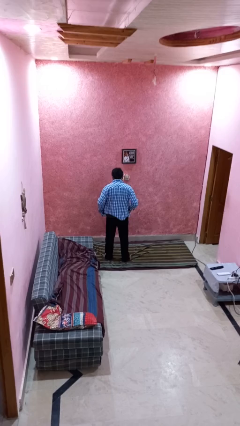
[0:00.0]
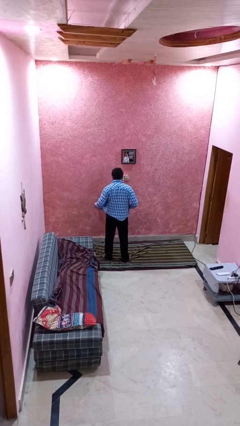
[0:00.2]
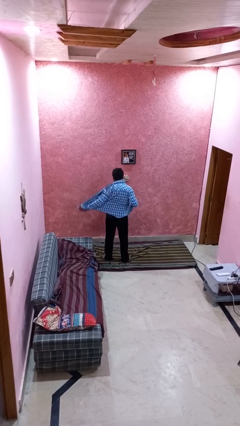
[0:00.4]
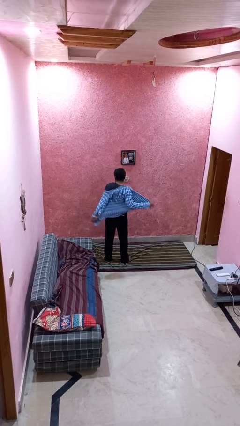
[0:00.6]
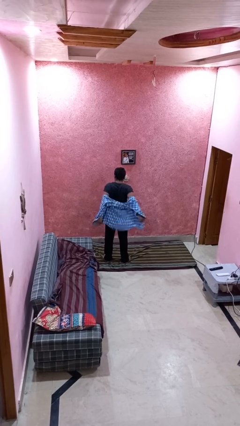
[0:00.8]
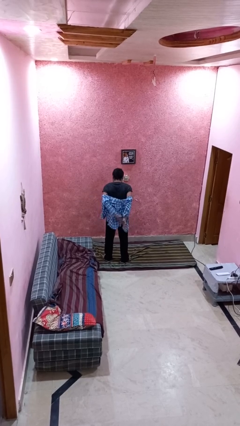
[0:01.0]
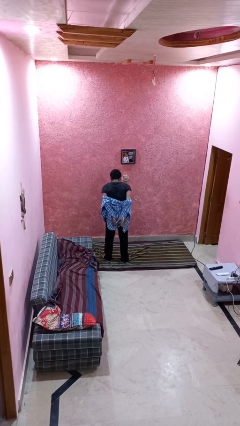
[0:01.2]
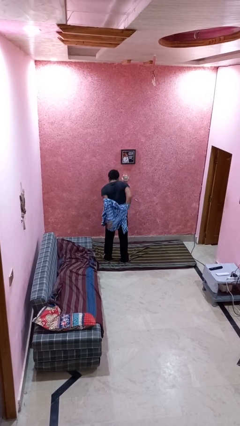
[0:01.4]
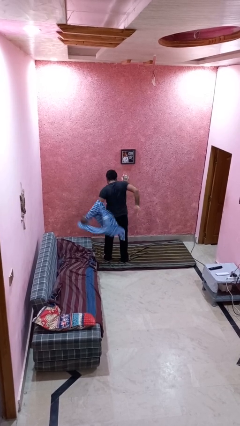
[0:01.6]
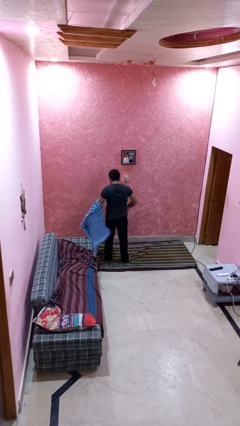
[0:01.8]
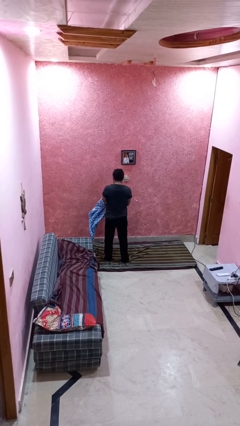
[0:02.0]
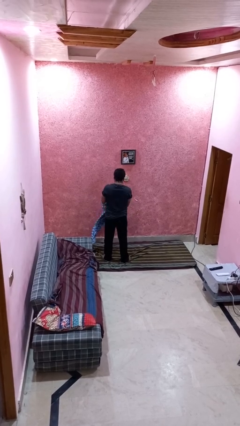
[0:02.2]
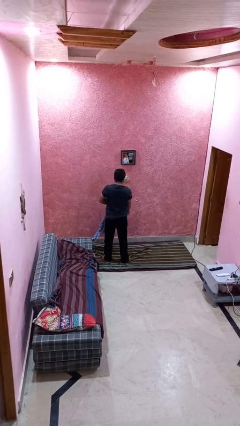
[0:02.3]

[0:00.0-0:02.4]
person takes off shirt

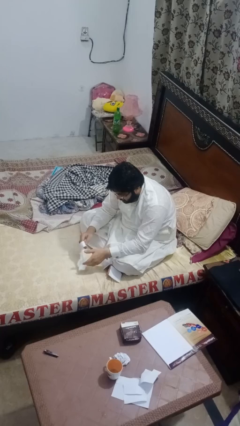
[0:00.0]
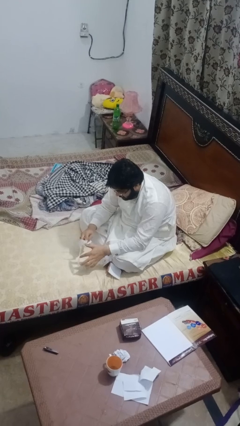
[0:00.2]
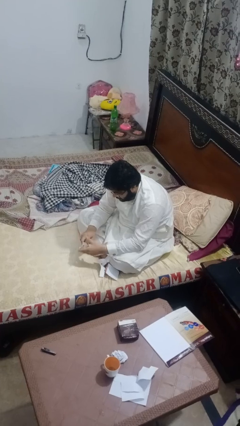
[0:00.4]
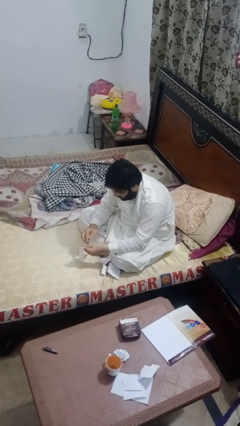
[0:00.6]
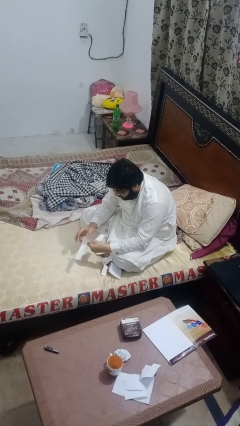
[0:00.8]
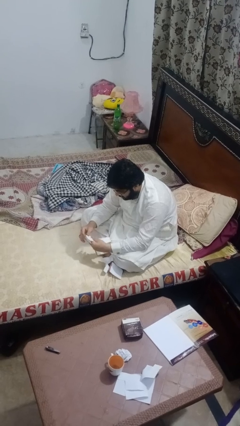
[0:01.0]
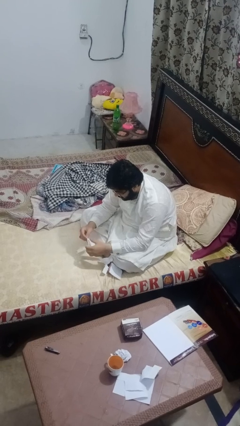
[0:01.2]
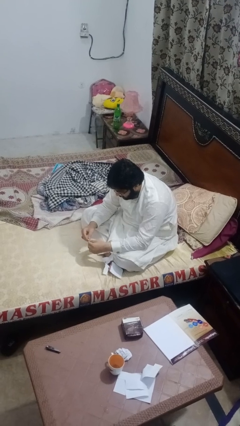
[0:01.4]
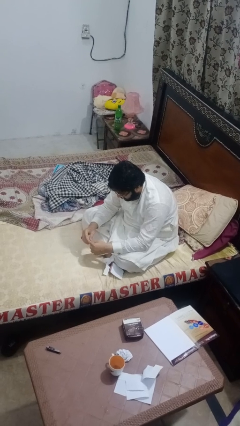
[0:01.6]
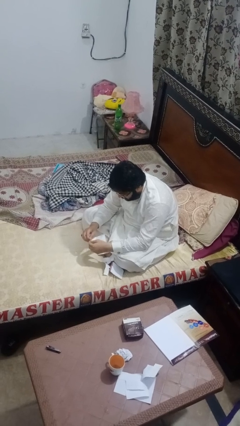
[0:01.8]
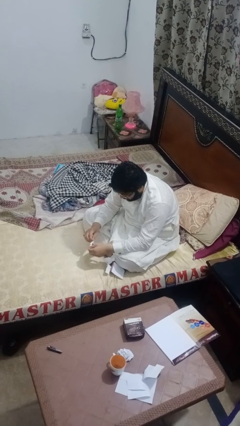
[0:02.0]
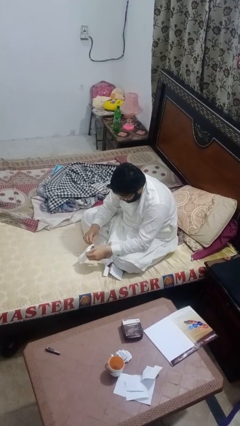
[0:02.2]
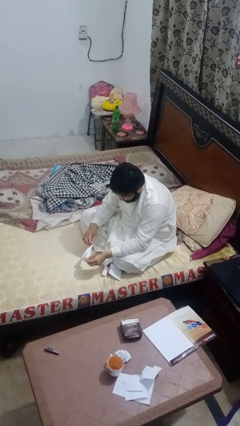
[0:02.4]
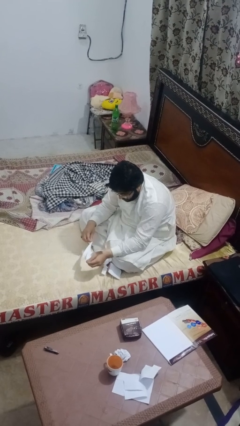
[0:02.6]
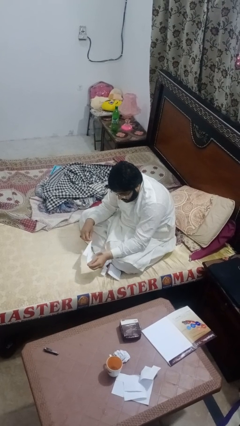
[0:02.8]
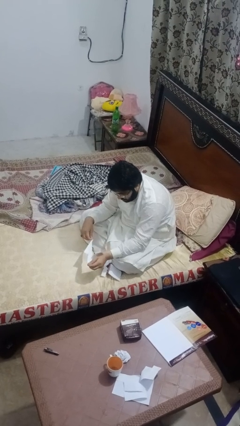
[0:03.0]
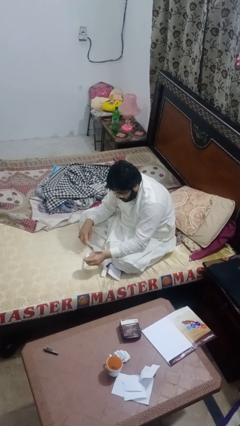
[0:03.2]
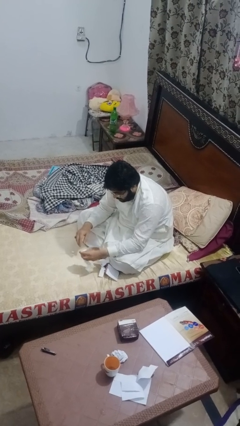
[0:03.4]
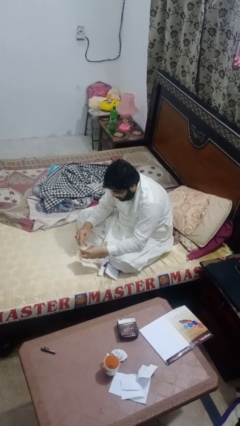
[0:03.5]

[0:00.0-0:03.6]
person tears paper

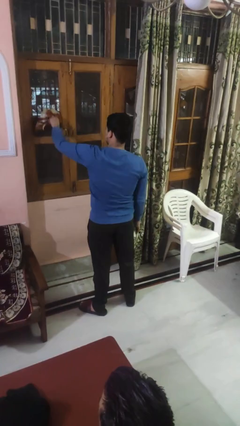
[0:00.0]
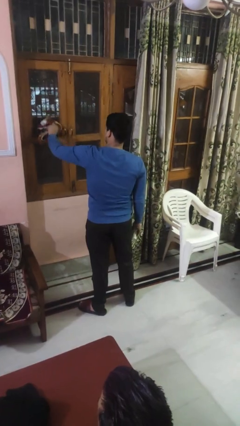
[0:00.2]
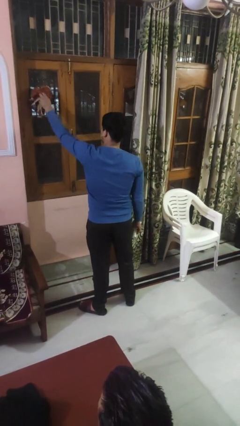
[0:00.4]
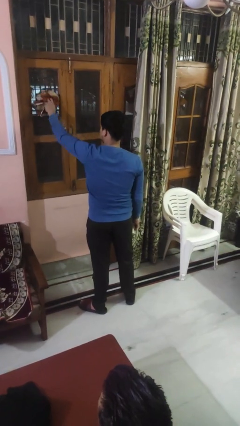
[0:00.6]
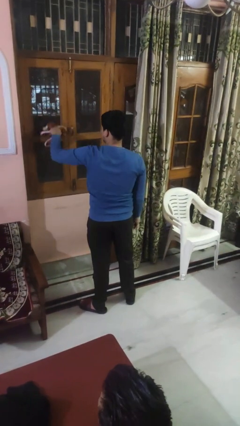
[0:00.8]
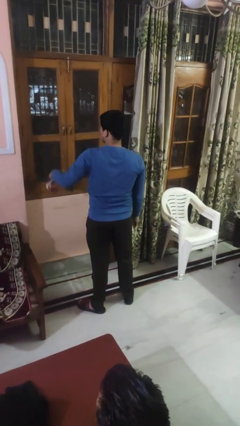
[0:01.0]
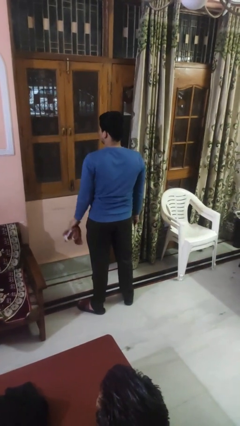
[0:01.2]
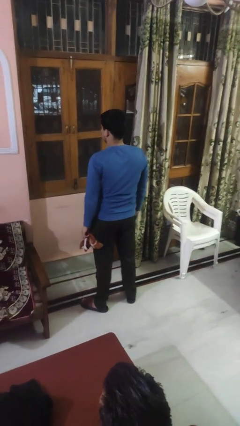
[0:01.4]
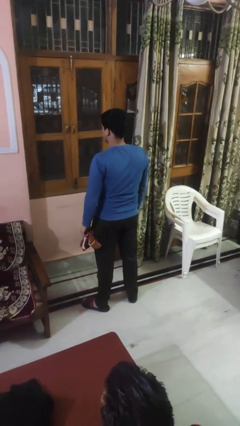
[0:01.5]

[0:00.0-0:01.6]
person washes window

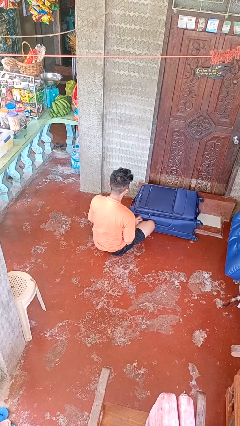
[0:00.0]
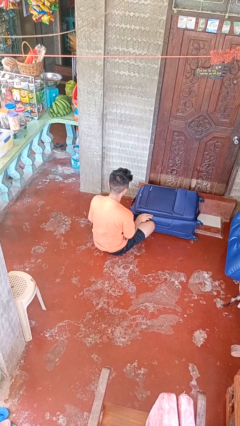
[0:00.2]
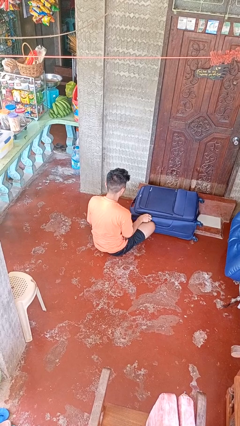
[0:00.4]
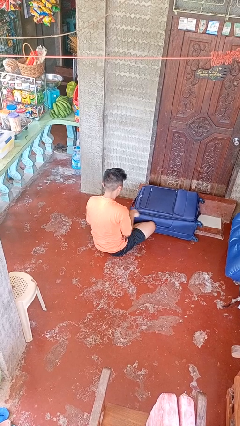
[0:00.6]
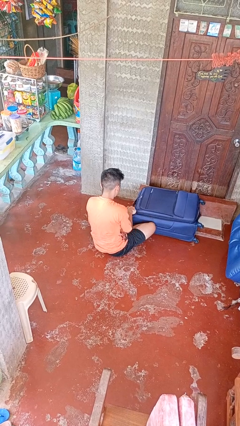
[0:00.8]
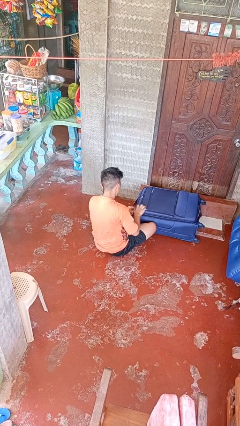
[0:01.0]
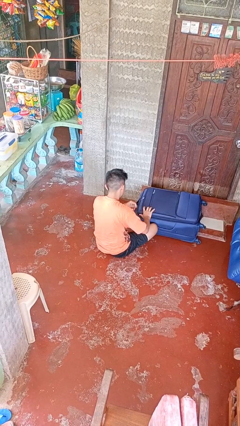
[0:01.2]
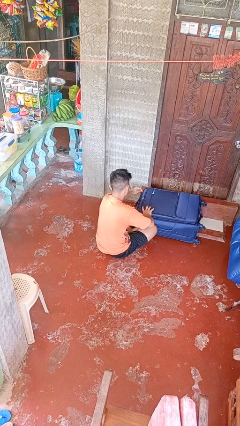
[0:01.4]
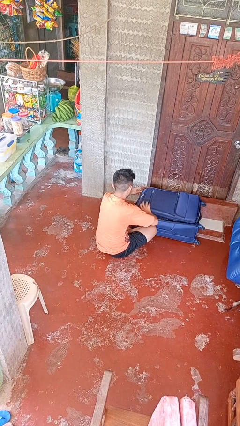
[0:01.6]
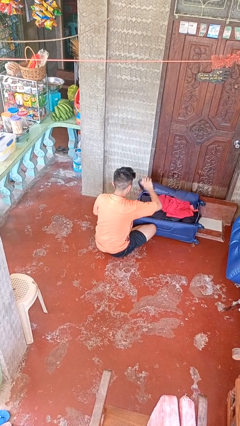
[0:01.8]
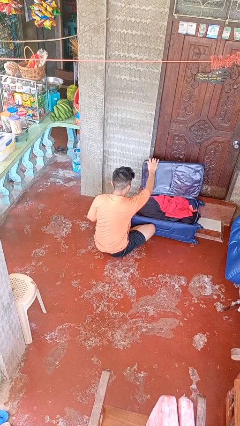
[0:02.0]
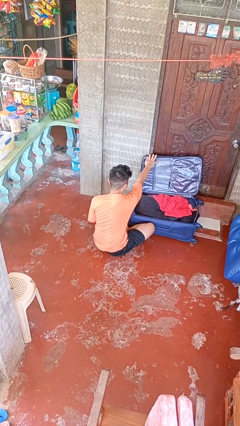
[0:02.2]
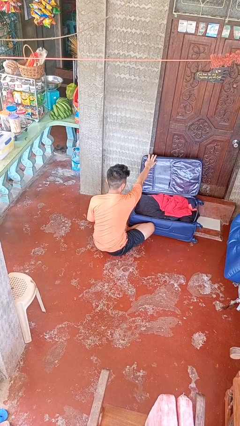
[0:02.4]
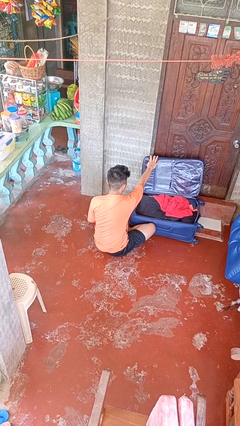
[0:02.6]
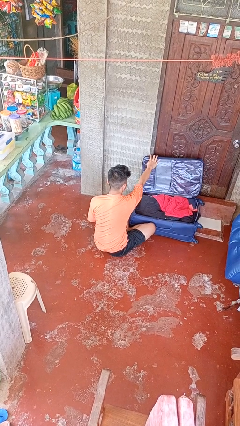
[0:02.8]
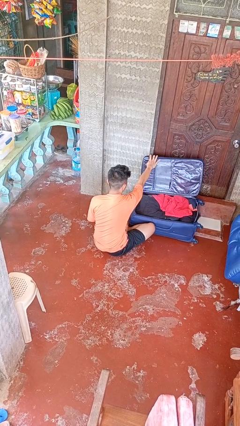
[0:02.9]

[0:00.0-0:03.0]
person opens suitcase

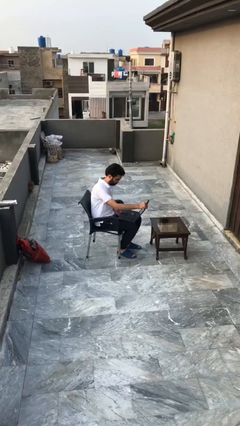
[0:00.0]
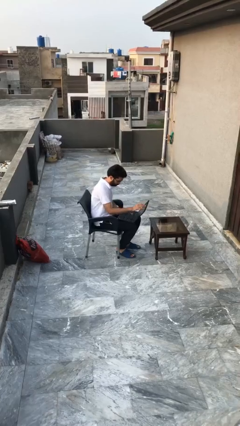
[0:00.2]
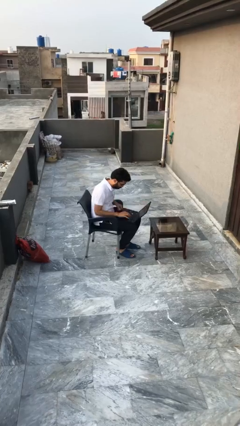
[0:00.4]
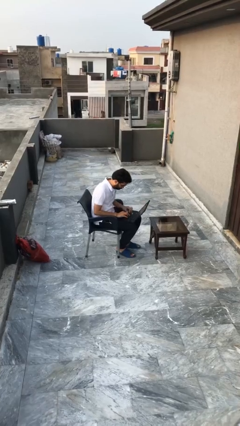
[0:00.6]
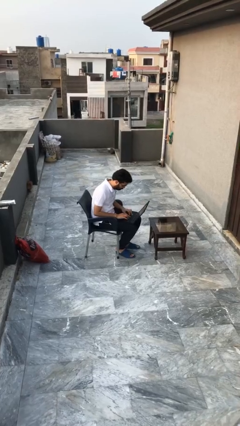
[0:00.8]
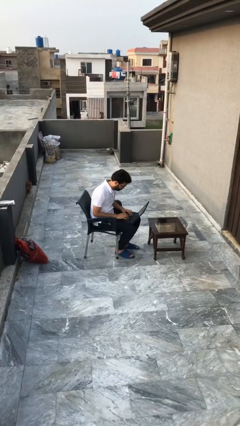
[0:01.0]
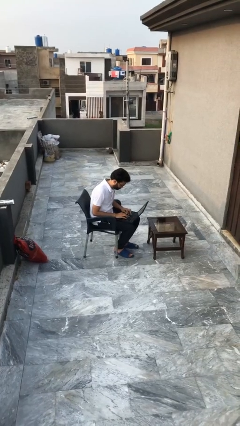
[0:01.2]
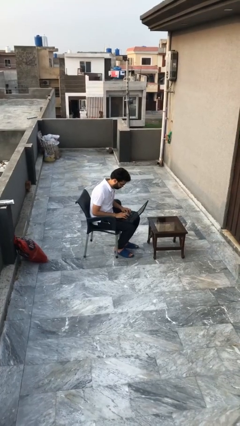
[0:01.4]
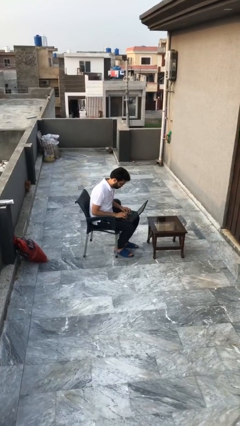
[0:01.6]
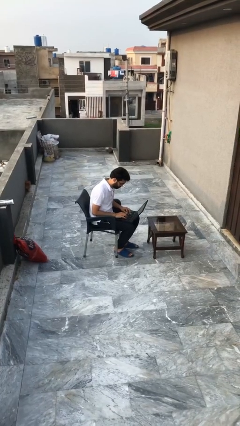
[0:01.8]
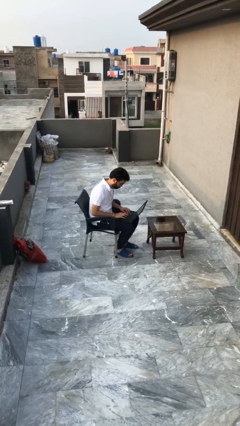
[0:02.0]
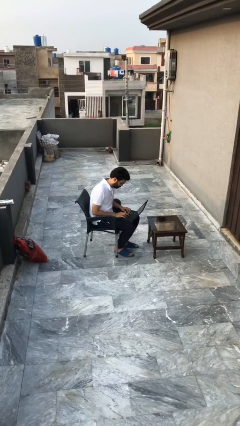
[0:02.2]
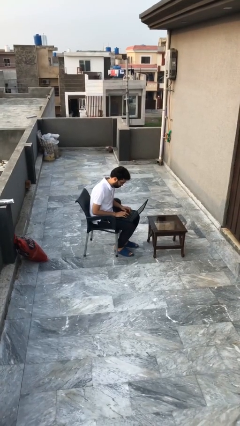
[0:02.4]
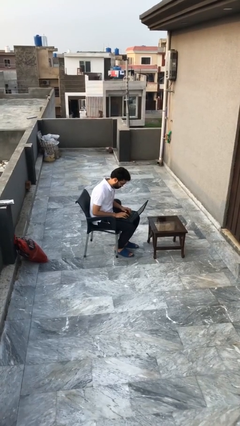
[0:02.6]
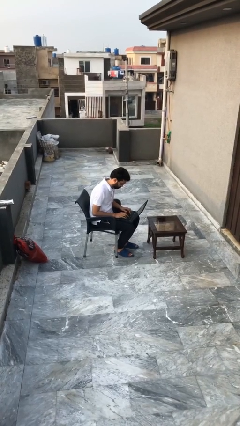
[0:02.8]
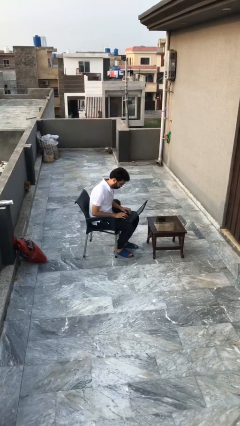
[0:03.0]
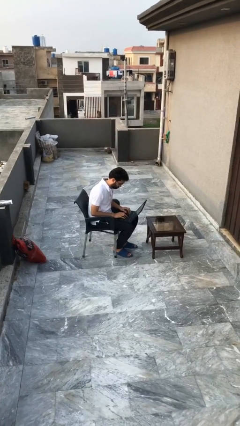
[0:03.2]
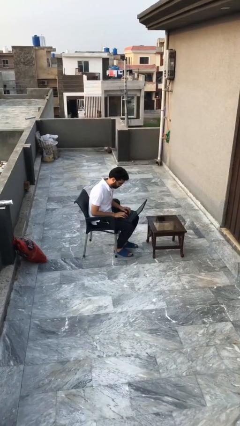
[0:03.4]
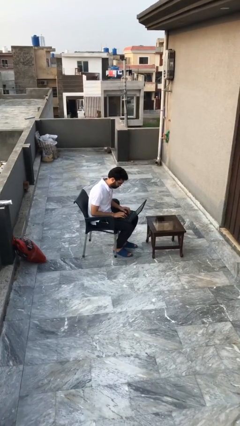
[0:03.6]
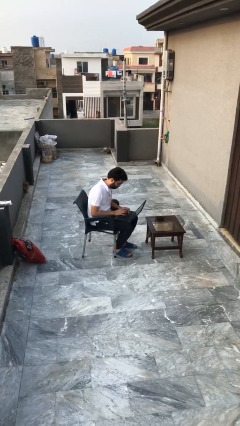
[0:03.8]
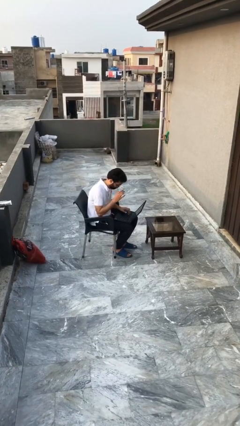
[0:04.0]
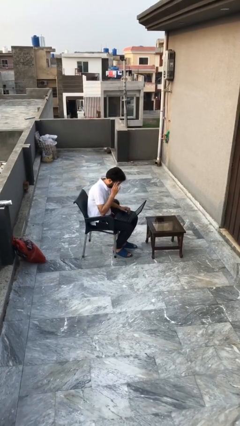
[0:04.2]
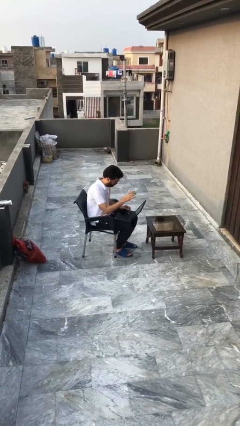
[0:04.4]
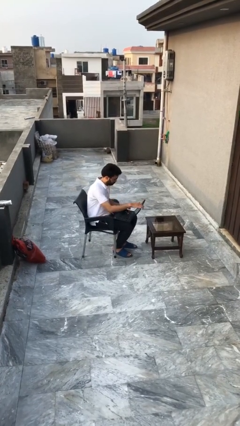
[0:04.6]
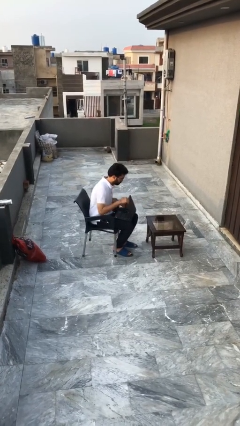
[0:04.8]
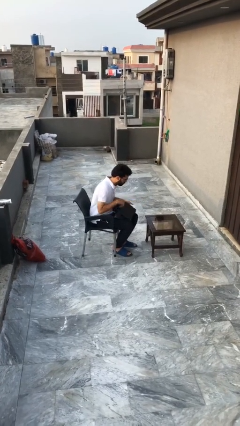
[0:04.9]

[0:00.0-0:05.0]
person interacts with laptop

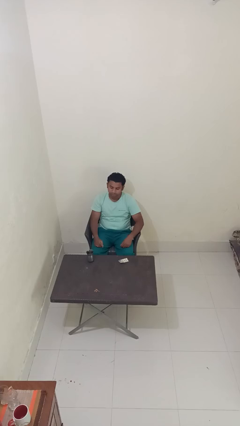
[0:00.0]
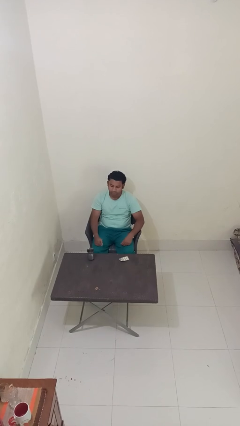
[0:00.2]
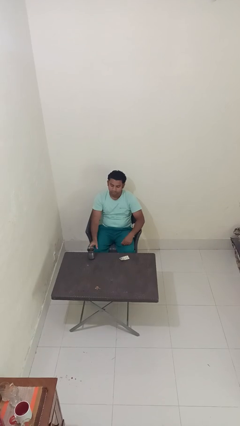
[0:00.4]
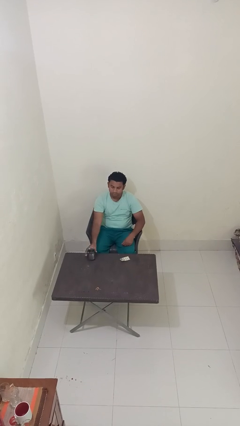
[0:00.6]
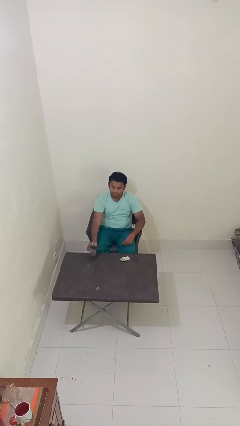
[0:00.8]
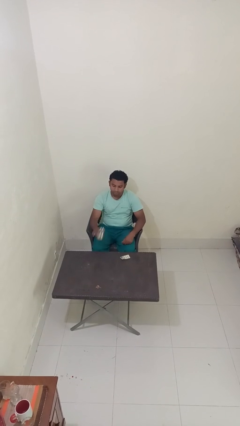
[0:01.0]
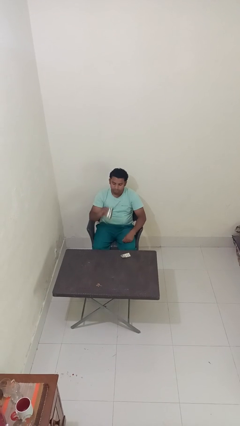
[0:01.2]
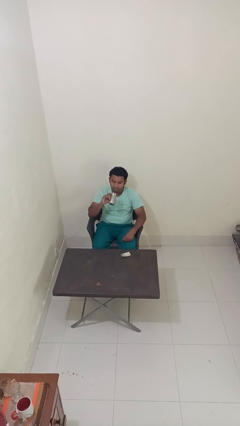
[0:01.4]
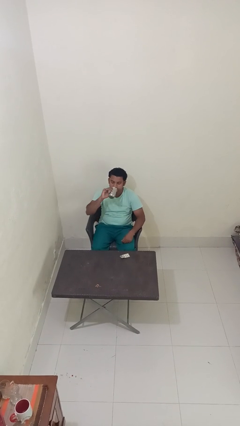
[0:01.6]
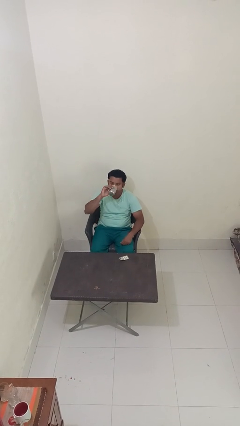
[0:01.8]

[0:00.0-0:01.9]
person drinks from cup
